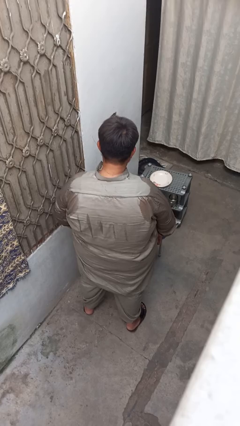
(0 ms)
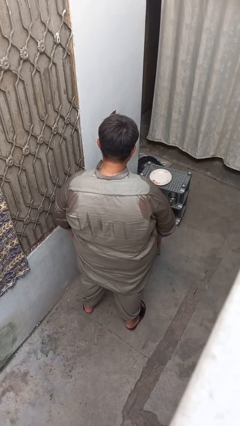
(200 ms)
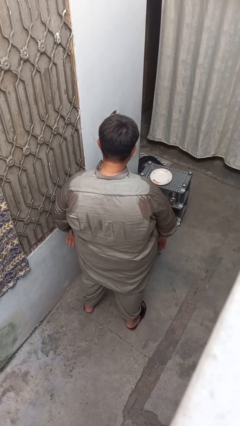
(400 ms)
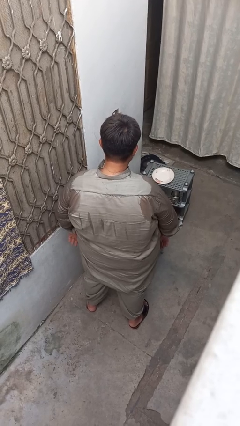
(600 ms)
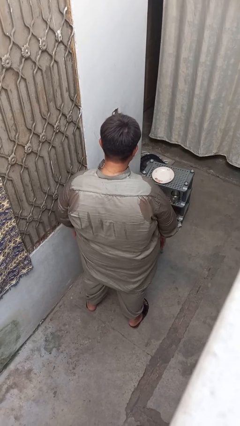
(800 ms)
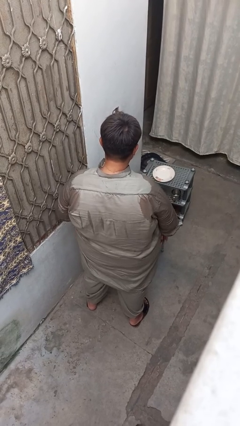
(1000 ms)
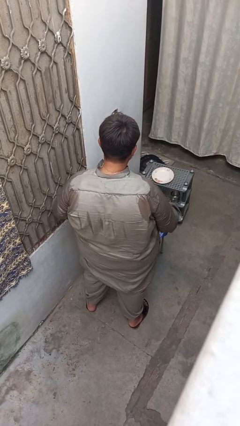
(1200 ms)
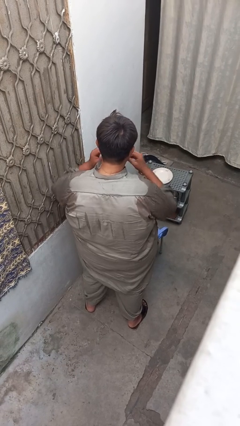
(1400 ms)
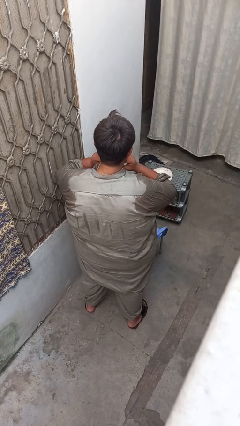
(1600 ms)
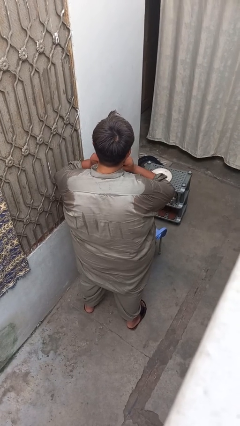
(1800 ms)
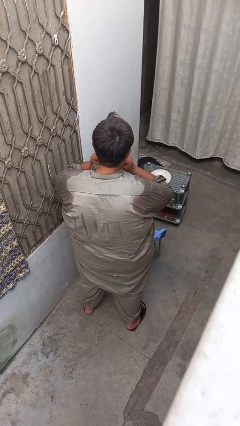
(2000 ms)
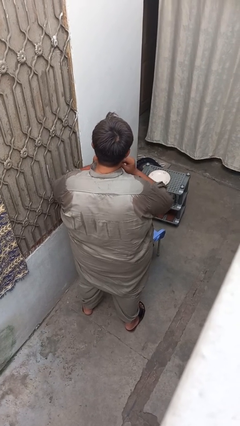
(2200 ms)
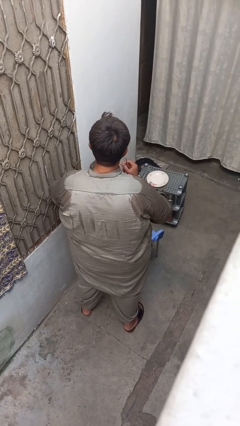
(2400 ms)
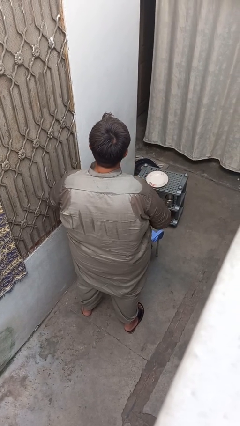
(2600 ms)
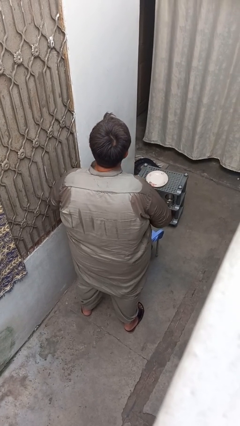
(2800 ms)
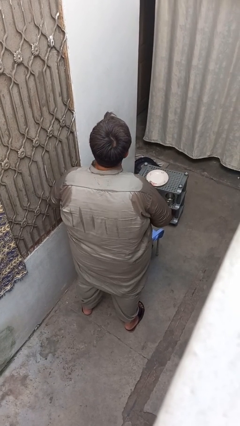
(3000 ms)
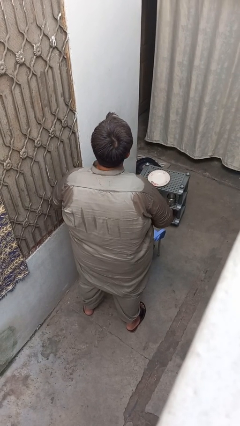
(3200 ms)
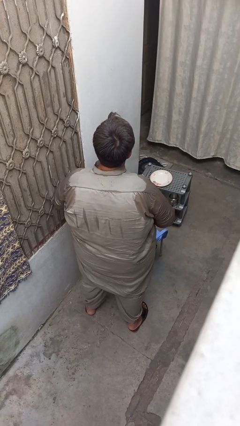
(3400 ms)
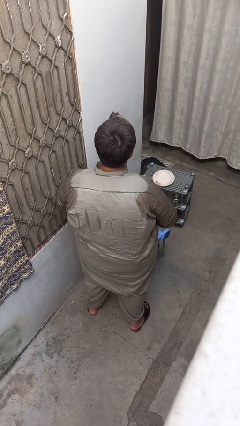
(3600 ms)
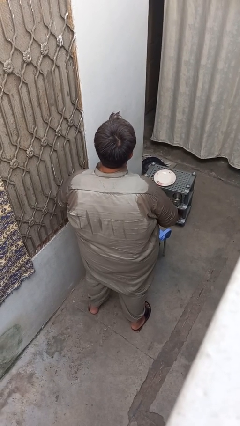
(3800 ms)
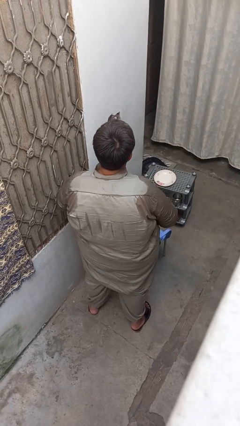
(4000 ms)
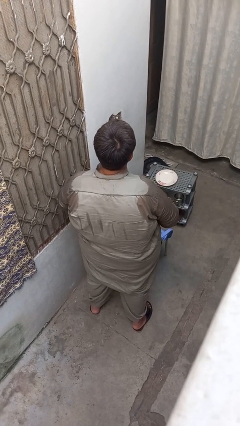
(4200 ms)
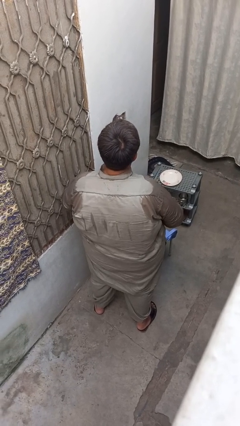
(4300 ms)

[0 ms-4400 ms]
person takes off necklace

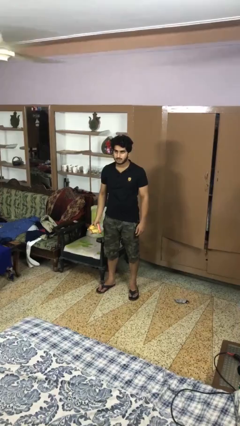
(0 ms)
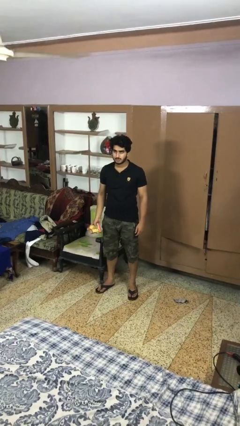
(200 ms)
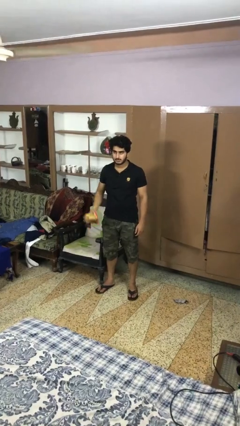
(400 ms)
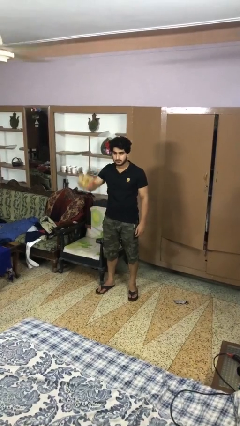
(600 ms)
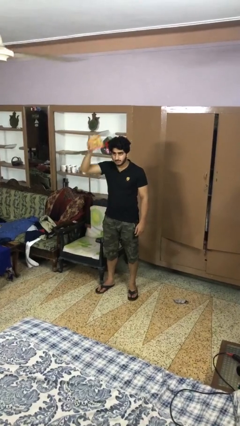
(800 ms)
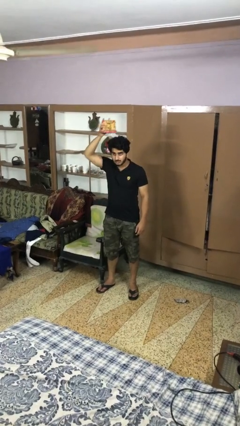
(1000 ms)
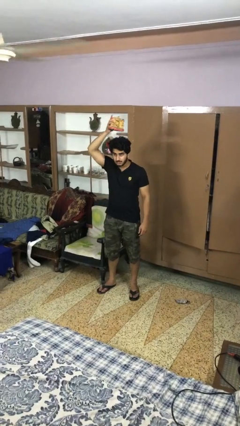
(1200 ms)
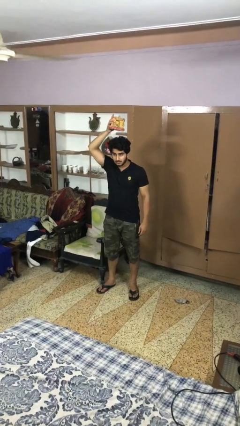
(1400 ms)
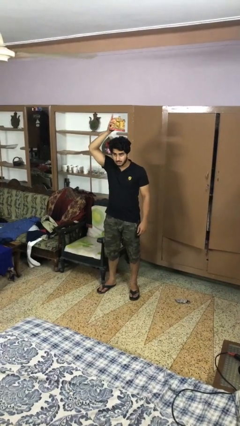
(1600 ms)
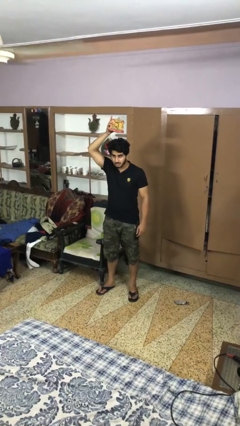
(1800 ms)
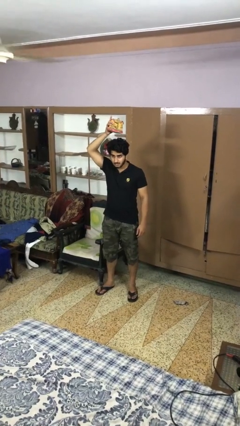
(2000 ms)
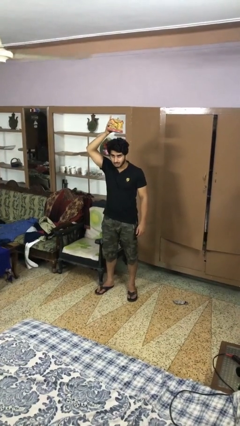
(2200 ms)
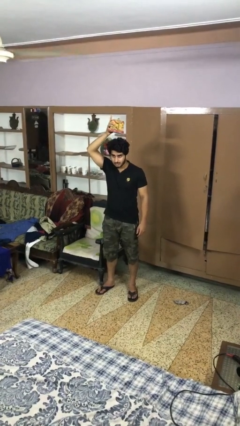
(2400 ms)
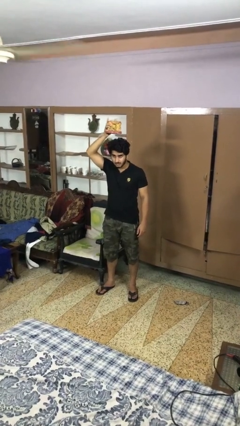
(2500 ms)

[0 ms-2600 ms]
person holds object above head

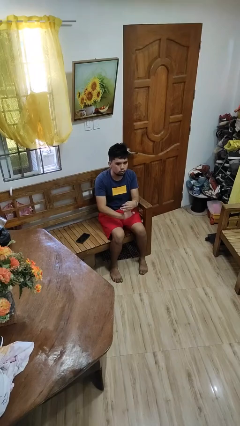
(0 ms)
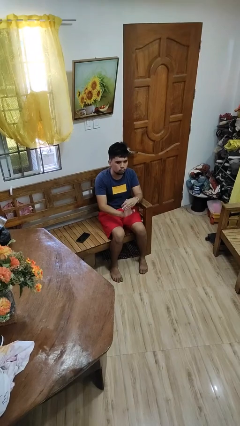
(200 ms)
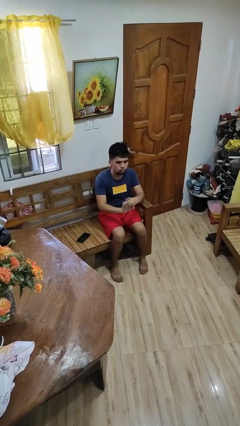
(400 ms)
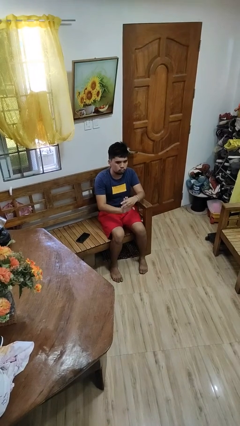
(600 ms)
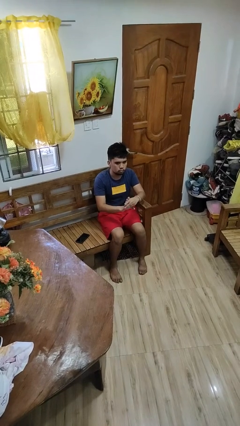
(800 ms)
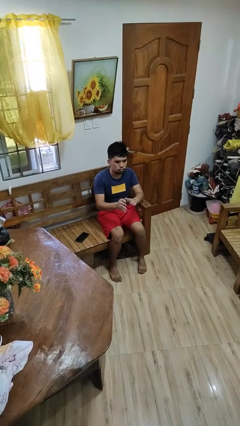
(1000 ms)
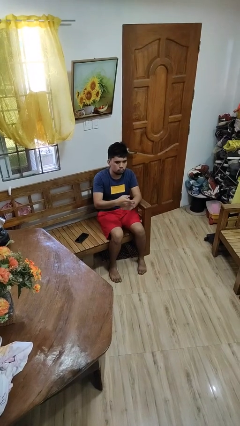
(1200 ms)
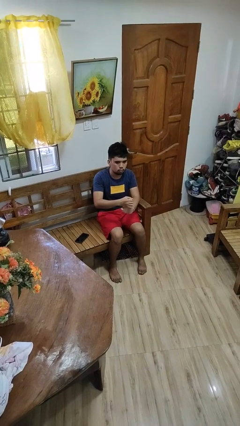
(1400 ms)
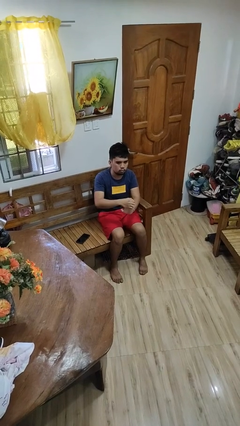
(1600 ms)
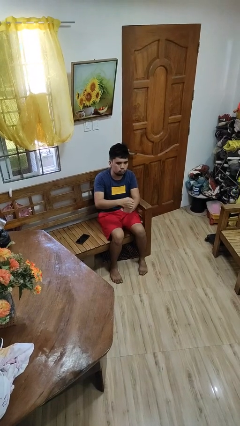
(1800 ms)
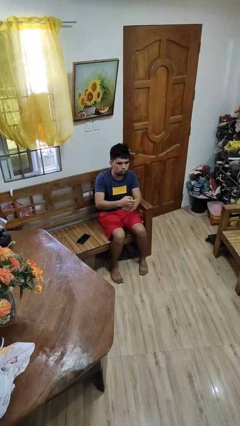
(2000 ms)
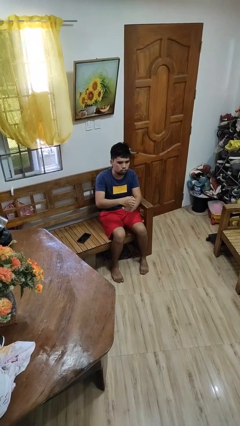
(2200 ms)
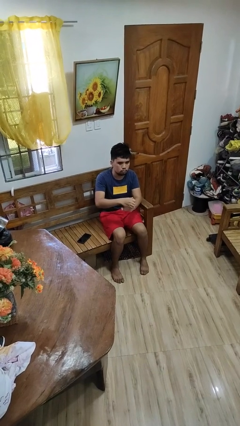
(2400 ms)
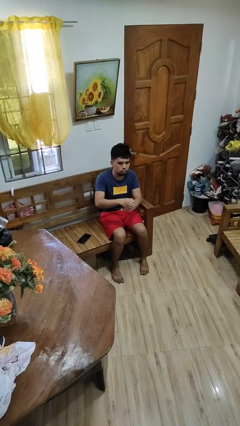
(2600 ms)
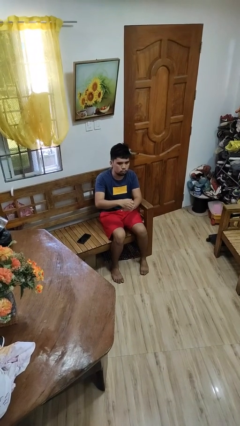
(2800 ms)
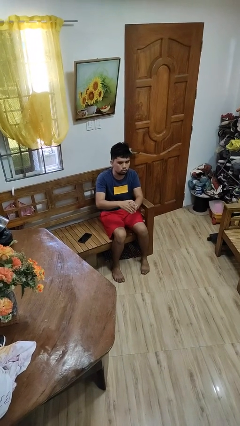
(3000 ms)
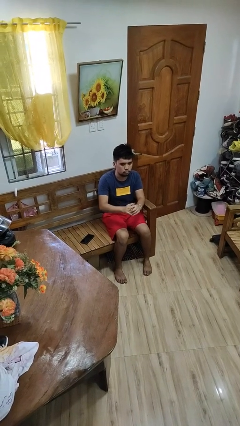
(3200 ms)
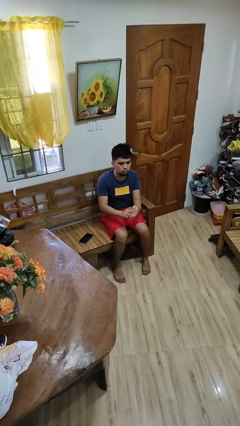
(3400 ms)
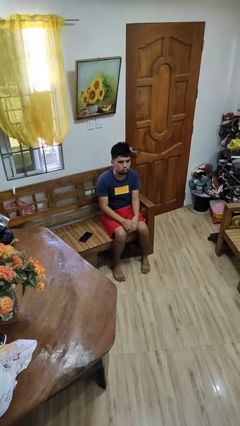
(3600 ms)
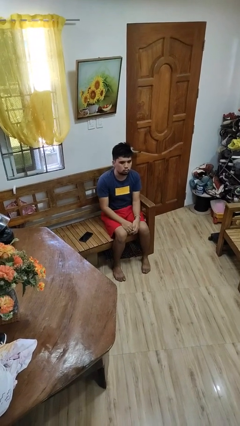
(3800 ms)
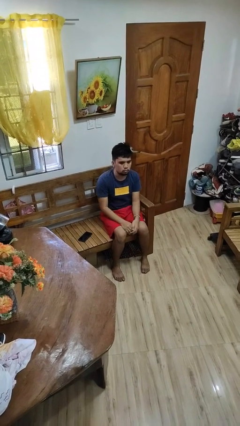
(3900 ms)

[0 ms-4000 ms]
person cracks knuckles

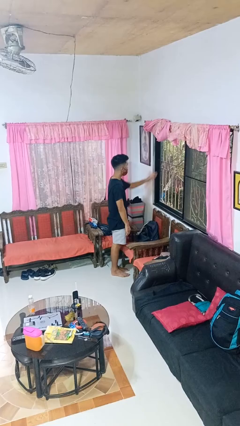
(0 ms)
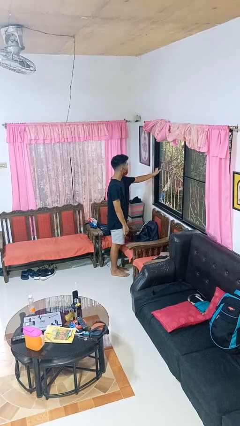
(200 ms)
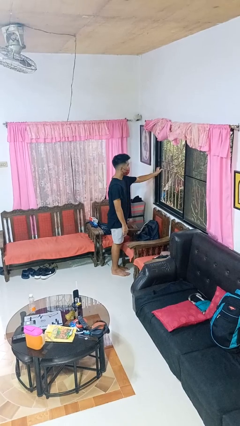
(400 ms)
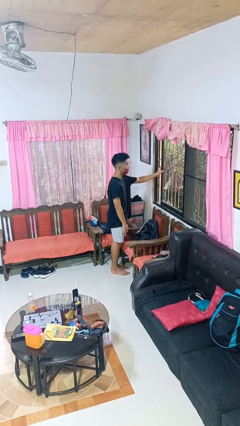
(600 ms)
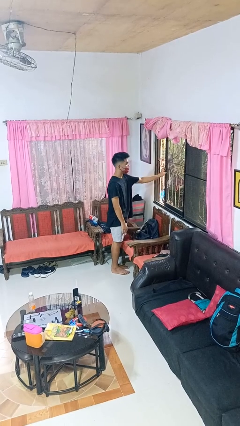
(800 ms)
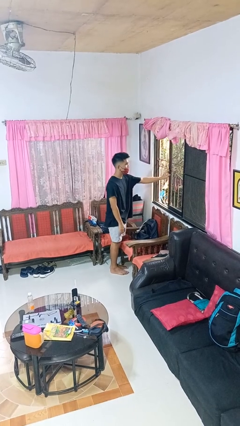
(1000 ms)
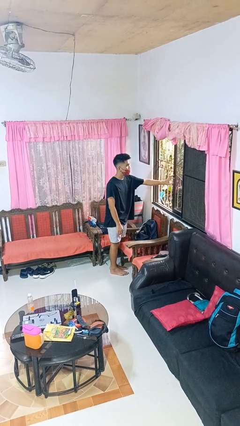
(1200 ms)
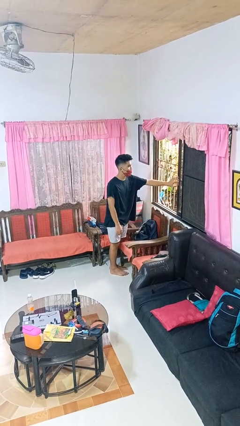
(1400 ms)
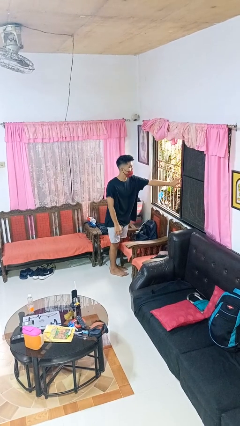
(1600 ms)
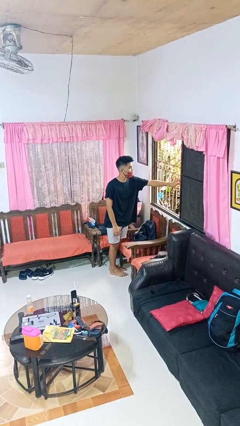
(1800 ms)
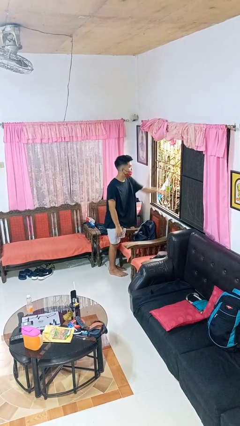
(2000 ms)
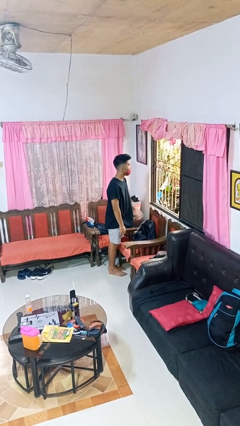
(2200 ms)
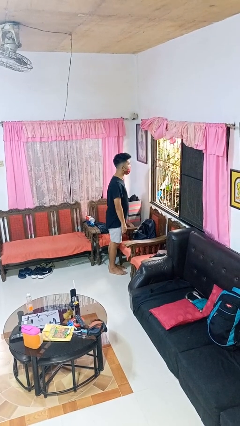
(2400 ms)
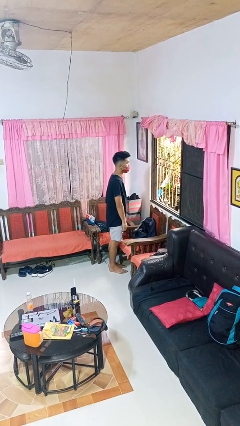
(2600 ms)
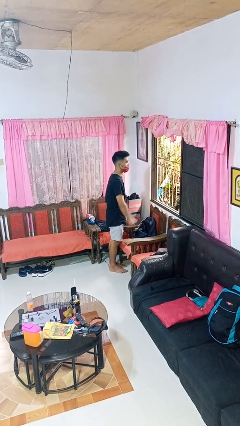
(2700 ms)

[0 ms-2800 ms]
person opens home window

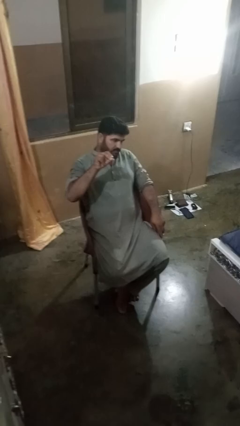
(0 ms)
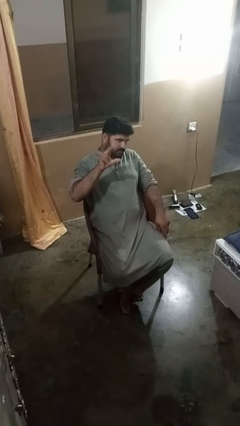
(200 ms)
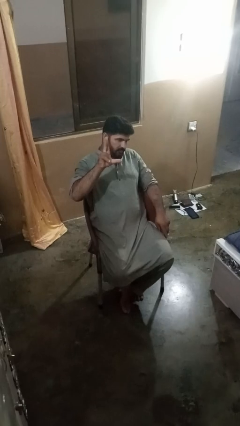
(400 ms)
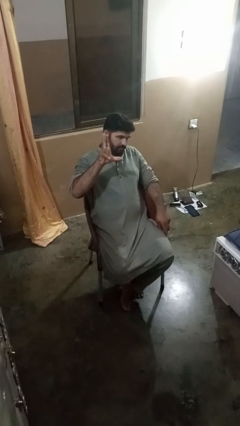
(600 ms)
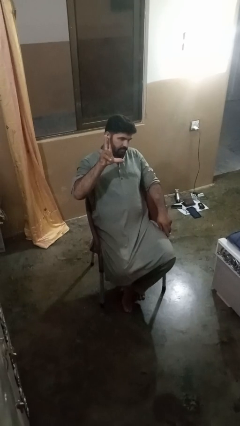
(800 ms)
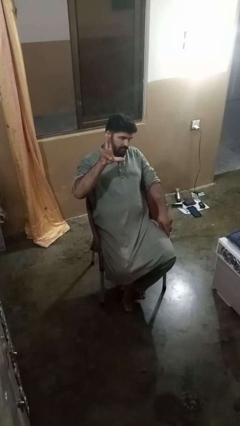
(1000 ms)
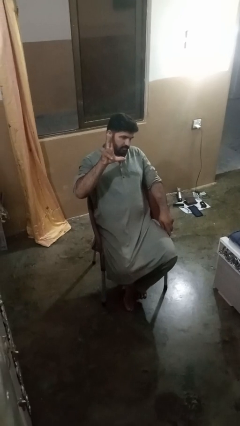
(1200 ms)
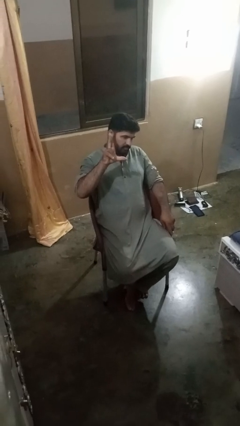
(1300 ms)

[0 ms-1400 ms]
person gestures zoom out

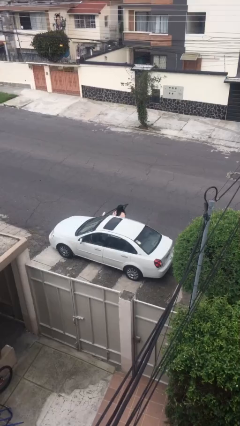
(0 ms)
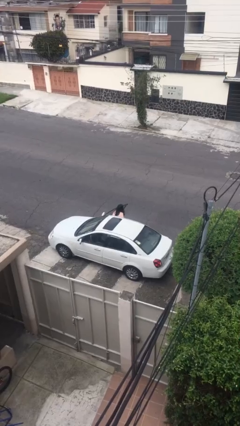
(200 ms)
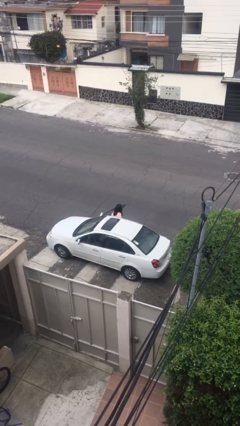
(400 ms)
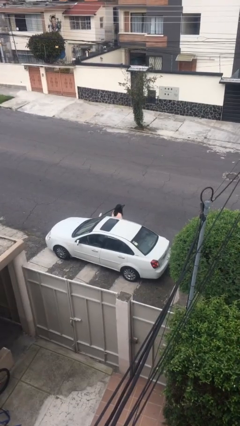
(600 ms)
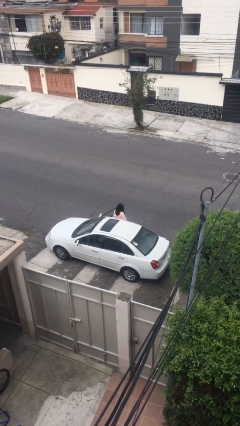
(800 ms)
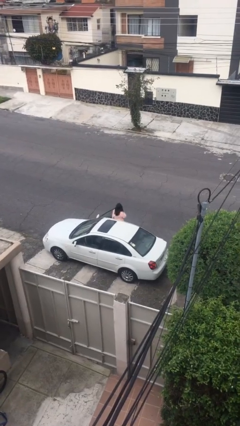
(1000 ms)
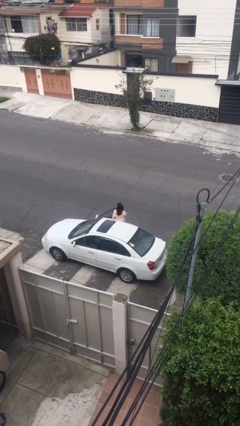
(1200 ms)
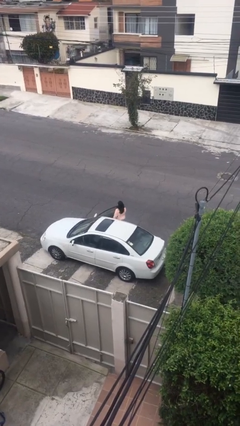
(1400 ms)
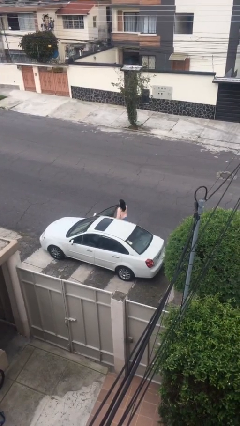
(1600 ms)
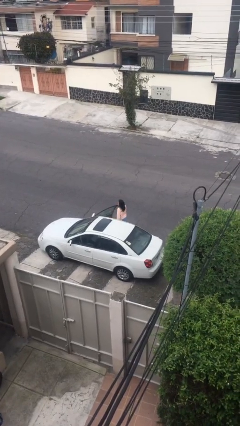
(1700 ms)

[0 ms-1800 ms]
person exits car
